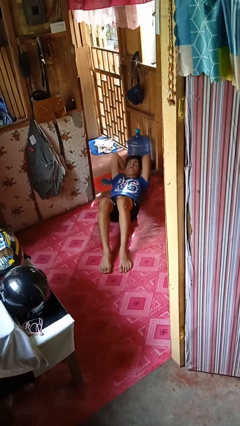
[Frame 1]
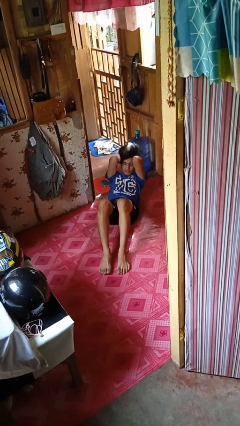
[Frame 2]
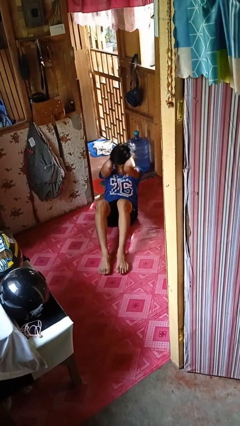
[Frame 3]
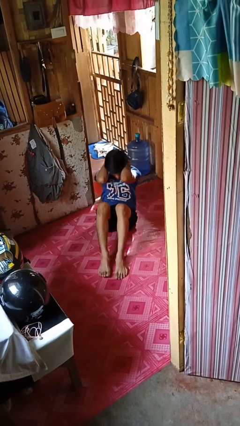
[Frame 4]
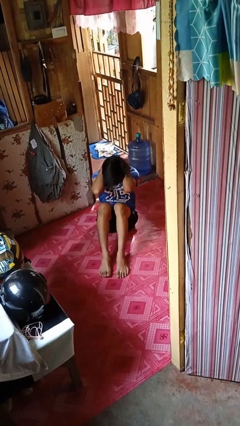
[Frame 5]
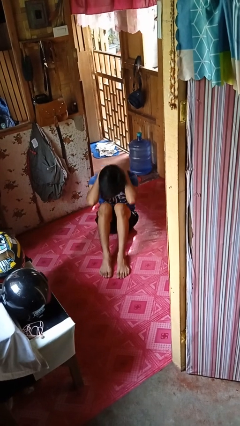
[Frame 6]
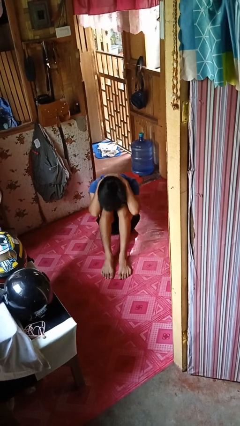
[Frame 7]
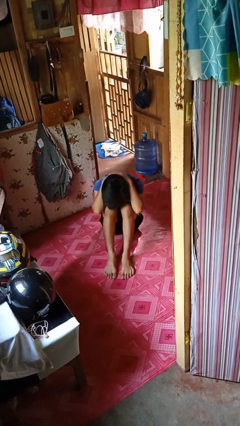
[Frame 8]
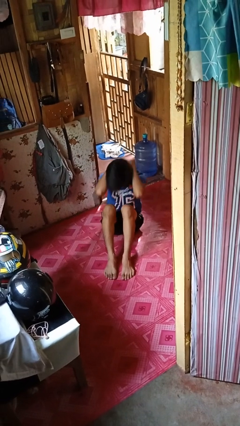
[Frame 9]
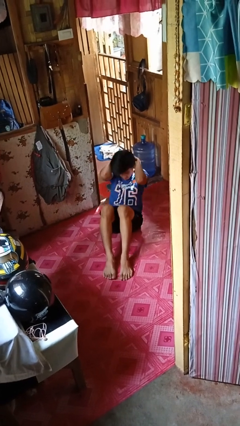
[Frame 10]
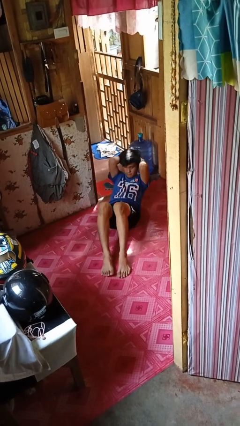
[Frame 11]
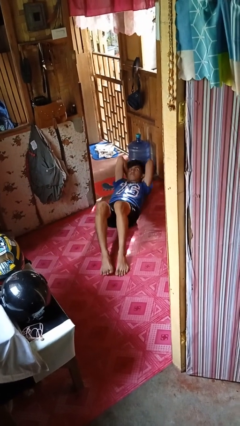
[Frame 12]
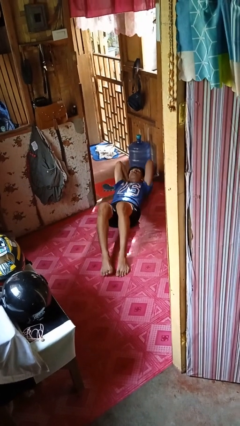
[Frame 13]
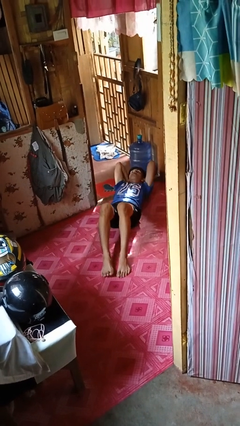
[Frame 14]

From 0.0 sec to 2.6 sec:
person exercises with situp

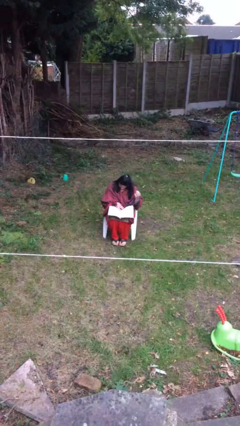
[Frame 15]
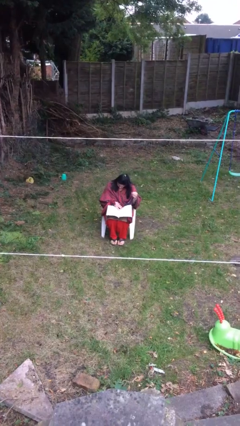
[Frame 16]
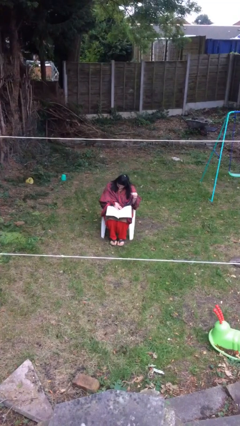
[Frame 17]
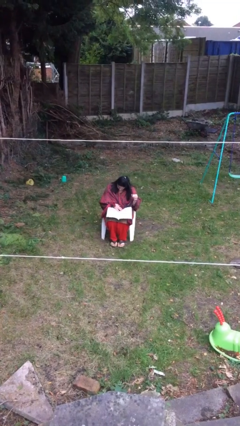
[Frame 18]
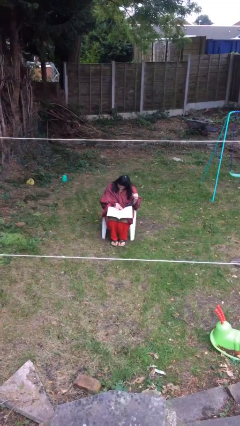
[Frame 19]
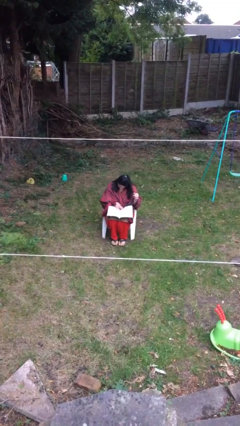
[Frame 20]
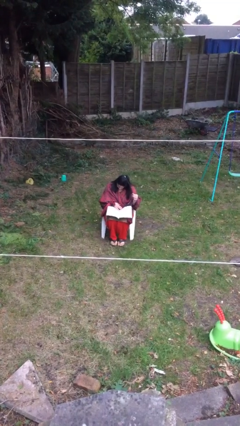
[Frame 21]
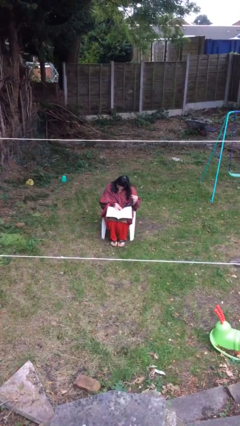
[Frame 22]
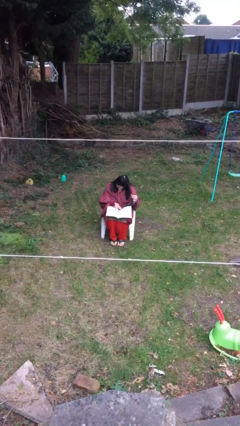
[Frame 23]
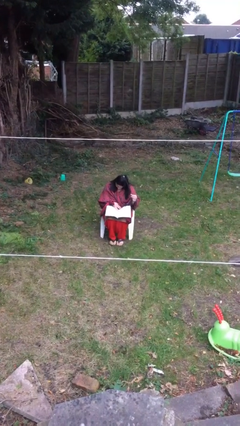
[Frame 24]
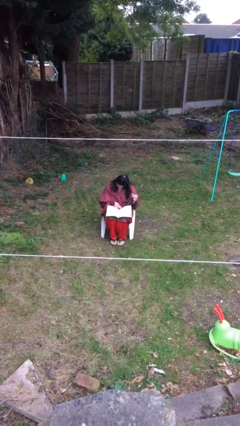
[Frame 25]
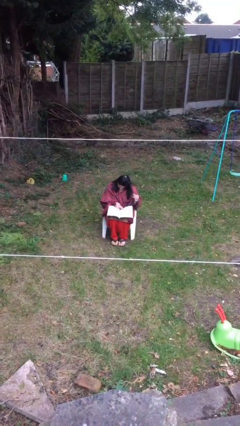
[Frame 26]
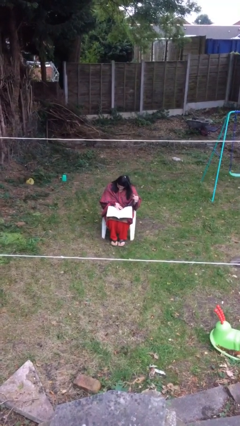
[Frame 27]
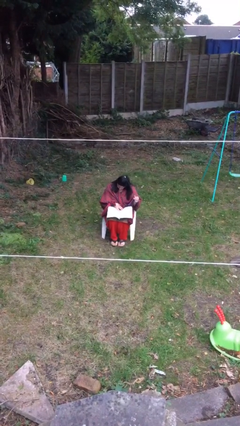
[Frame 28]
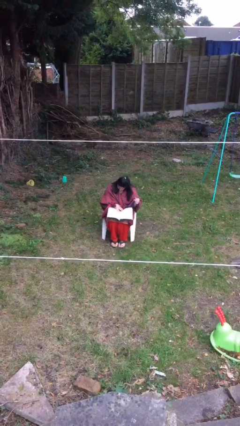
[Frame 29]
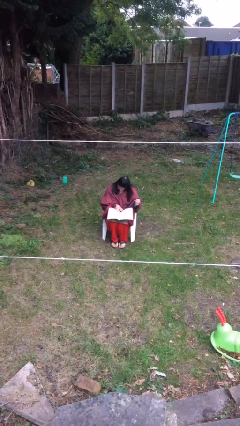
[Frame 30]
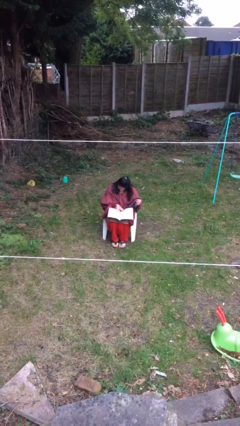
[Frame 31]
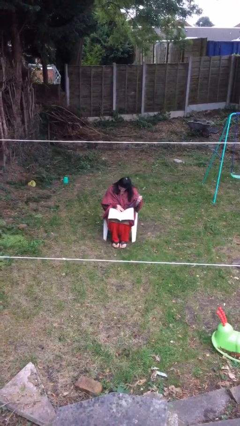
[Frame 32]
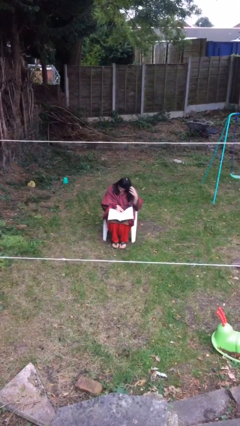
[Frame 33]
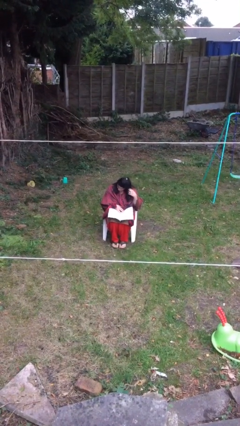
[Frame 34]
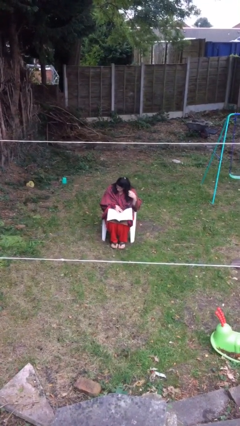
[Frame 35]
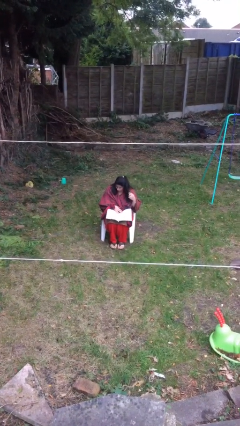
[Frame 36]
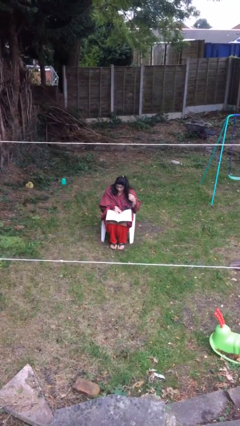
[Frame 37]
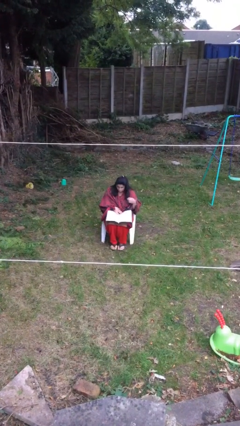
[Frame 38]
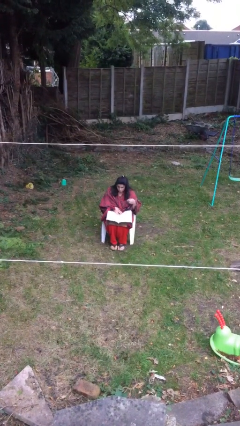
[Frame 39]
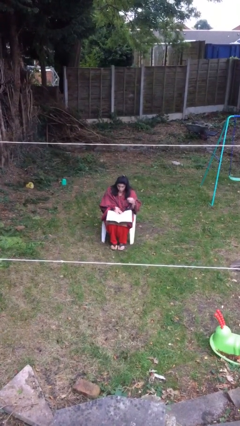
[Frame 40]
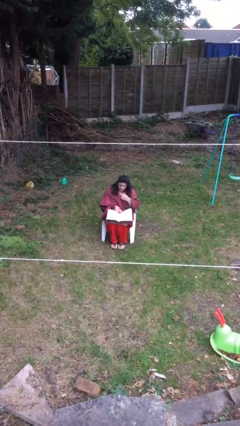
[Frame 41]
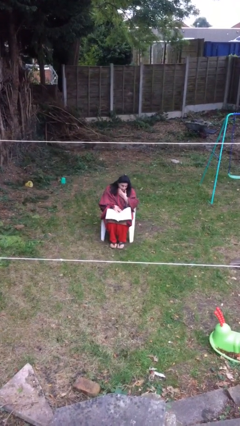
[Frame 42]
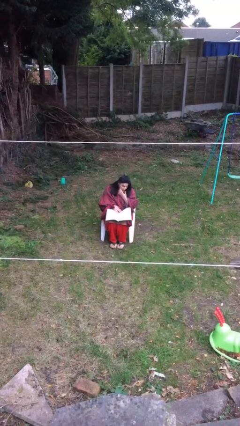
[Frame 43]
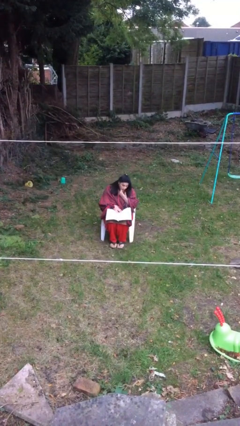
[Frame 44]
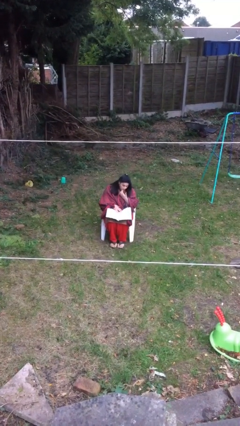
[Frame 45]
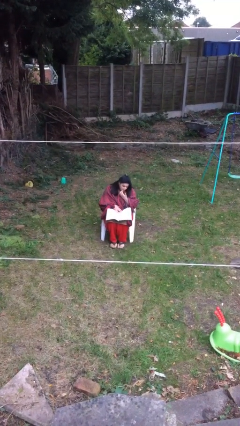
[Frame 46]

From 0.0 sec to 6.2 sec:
person reads document

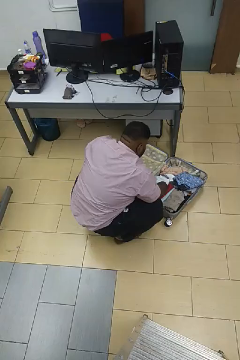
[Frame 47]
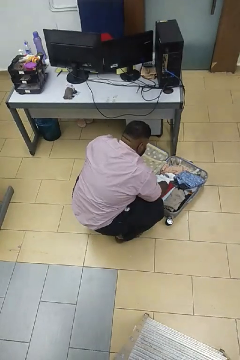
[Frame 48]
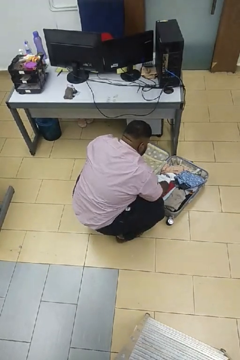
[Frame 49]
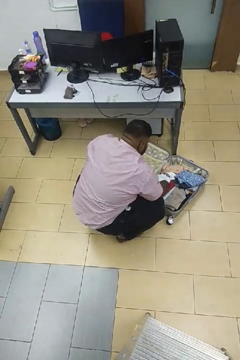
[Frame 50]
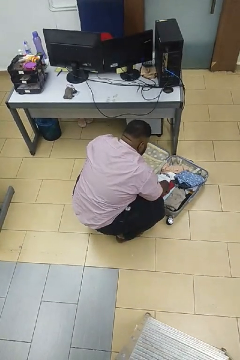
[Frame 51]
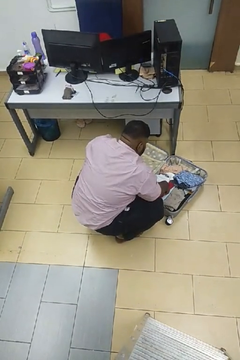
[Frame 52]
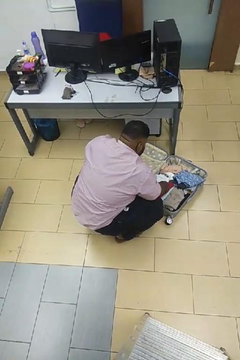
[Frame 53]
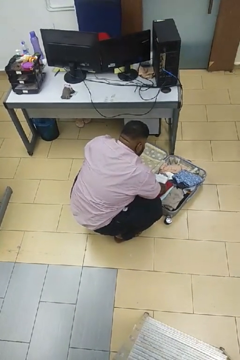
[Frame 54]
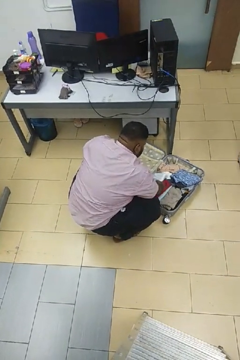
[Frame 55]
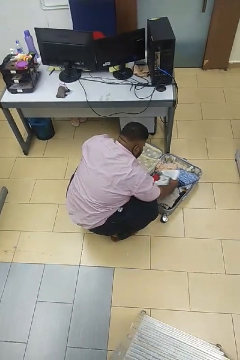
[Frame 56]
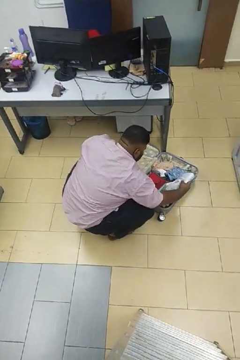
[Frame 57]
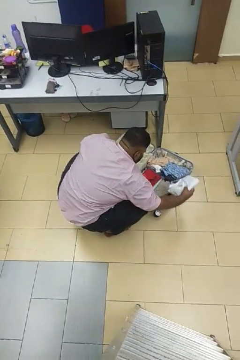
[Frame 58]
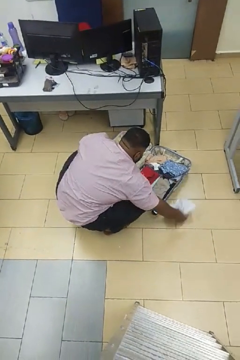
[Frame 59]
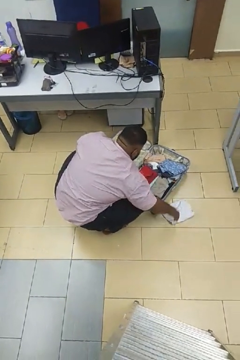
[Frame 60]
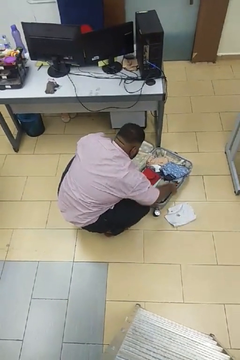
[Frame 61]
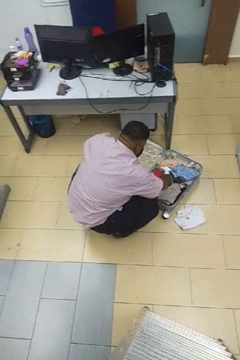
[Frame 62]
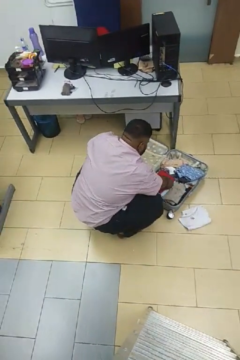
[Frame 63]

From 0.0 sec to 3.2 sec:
person unloads clothes from suitcase

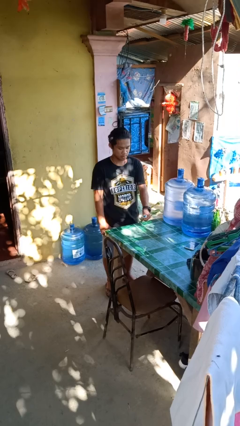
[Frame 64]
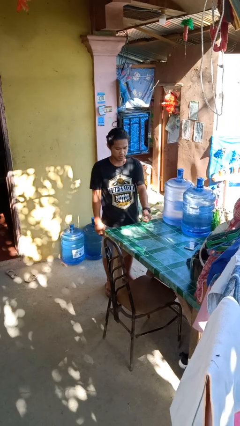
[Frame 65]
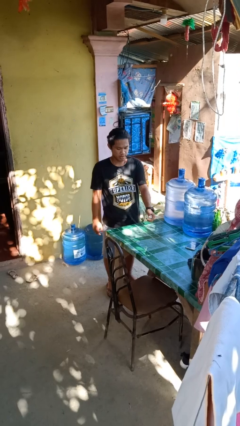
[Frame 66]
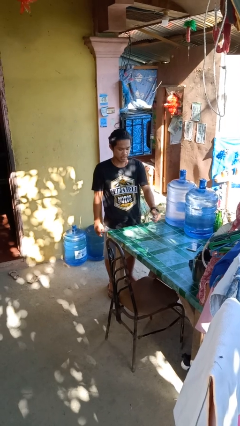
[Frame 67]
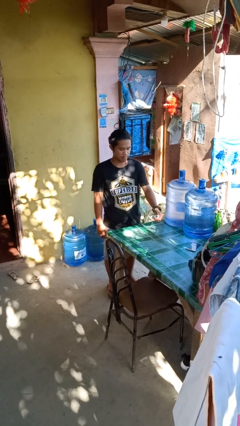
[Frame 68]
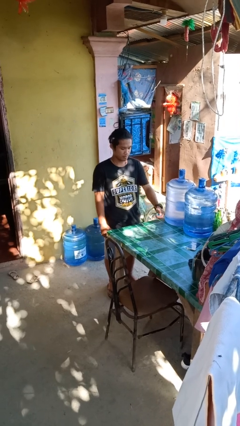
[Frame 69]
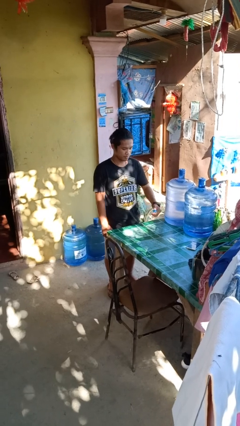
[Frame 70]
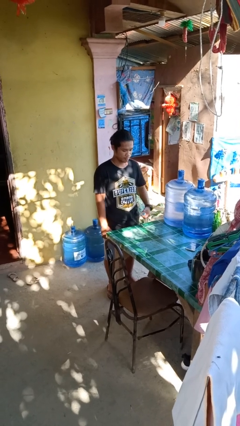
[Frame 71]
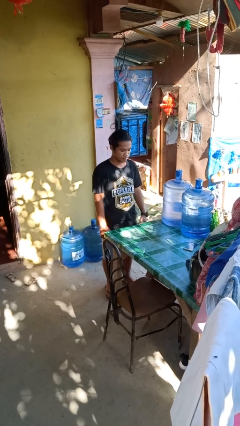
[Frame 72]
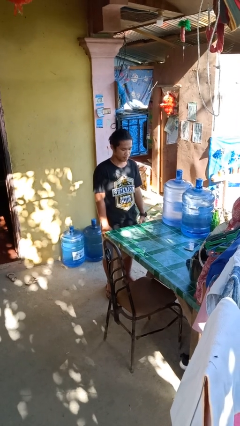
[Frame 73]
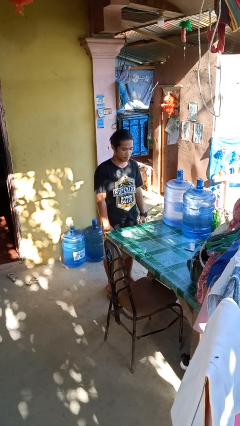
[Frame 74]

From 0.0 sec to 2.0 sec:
person sprays from bottle

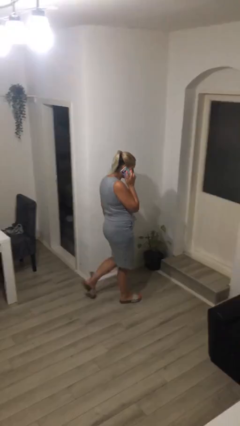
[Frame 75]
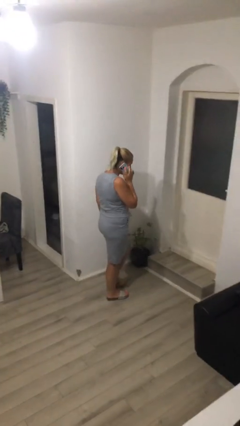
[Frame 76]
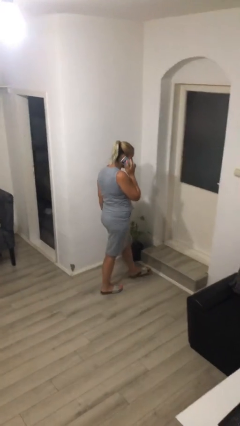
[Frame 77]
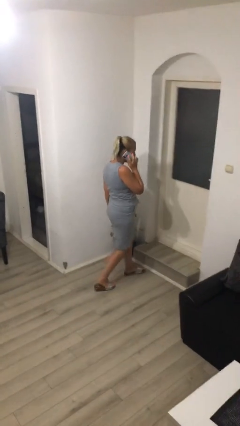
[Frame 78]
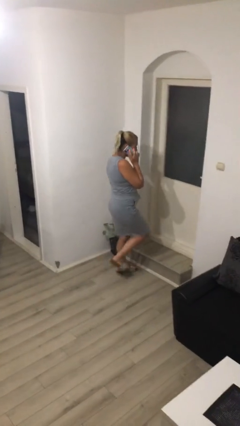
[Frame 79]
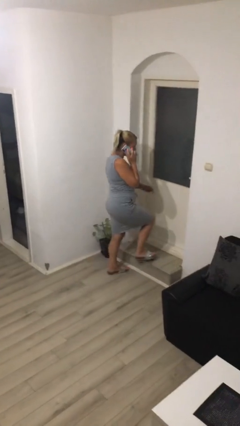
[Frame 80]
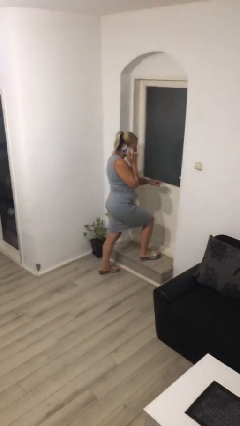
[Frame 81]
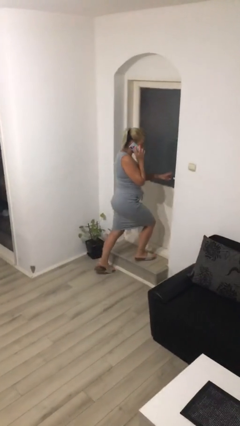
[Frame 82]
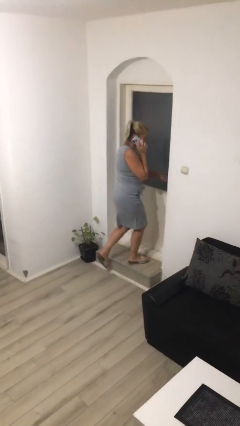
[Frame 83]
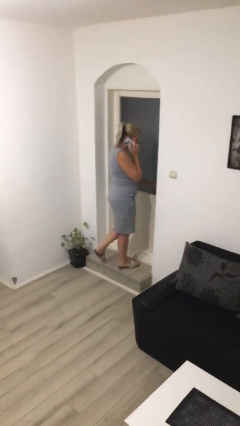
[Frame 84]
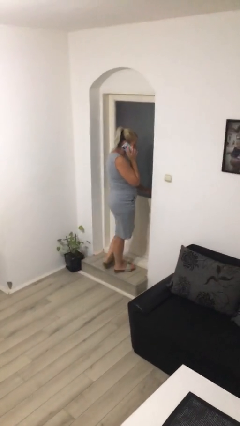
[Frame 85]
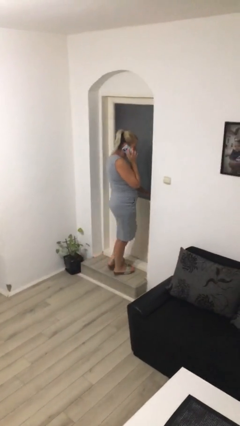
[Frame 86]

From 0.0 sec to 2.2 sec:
person opens facility door

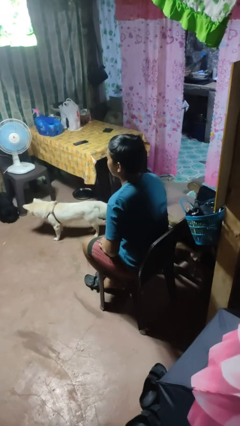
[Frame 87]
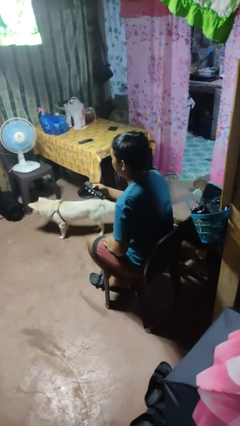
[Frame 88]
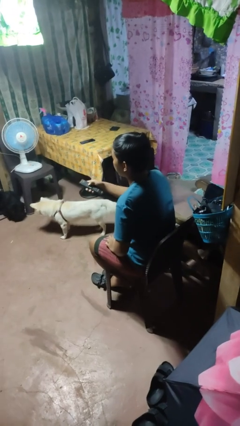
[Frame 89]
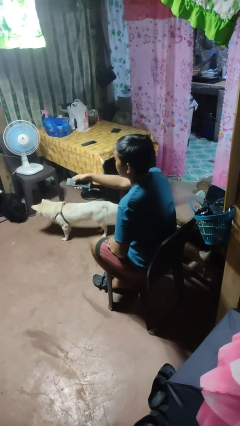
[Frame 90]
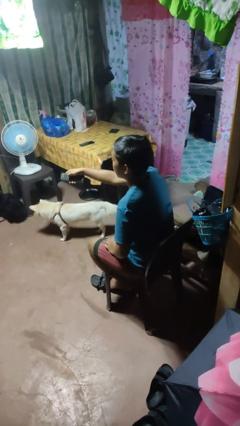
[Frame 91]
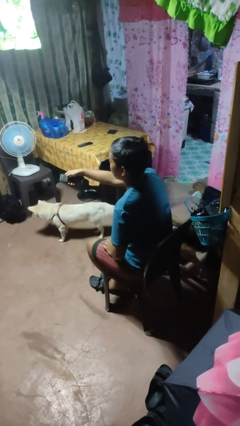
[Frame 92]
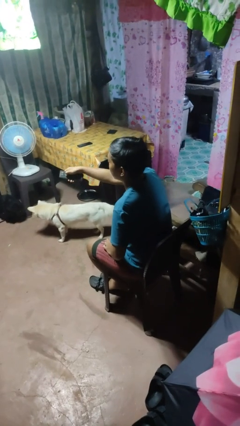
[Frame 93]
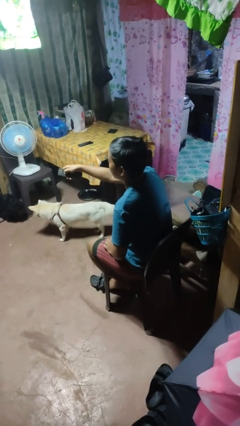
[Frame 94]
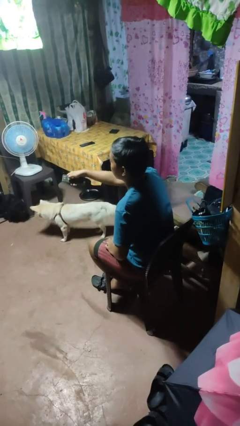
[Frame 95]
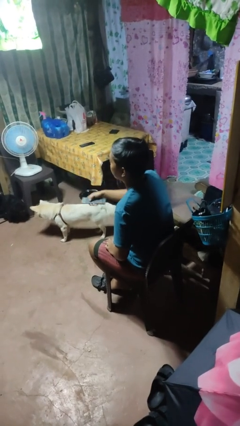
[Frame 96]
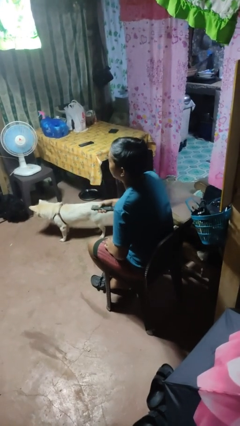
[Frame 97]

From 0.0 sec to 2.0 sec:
person uses television remote
